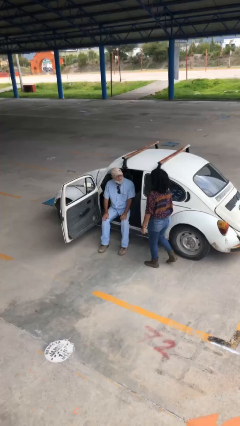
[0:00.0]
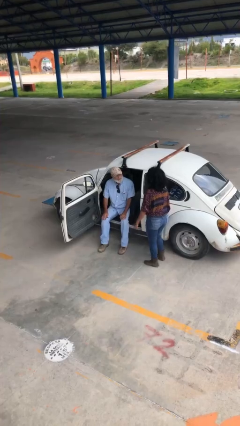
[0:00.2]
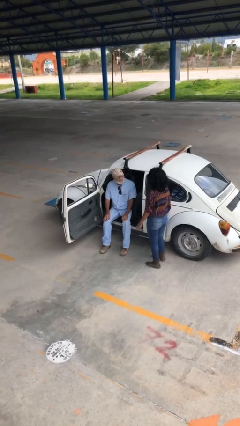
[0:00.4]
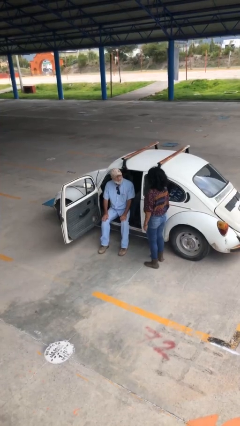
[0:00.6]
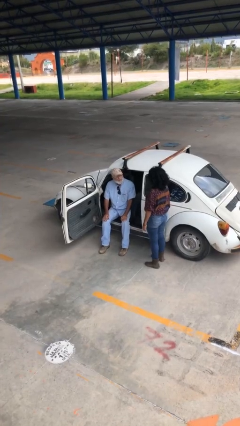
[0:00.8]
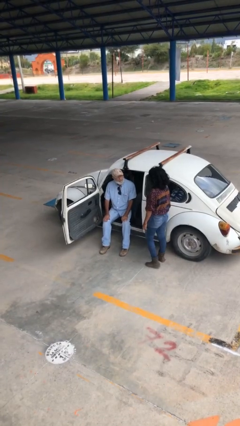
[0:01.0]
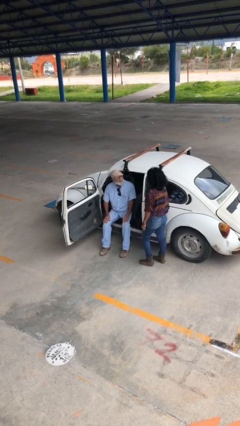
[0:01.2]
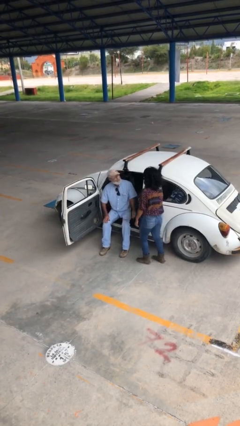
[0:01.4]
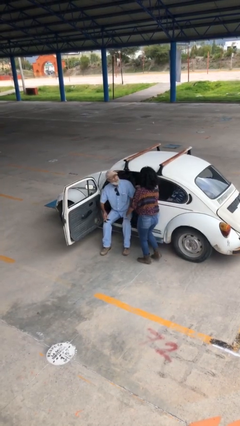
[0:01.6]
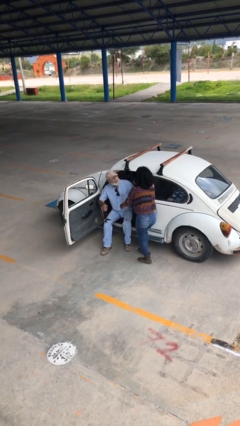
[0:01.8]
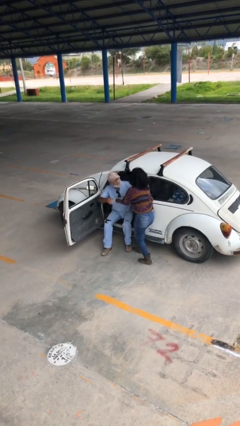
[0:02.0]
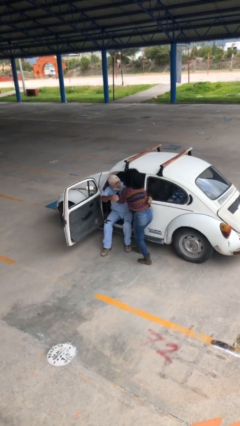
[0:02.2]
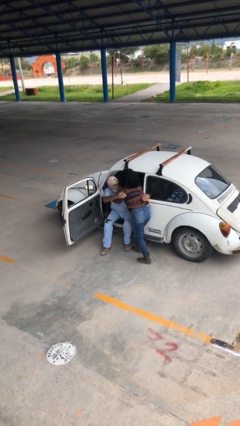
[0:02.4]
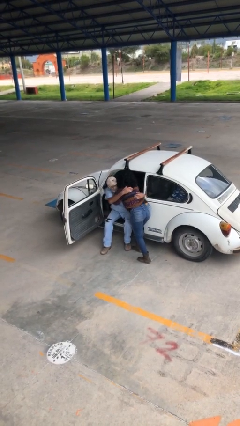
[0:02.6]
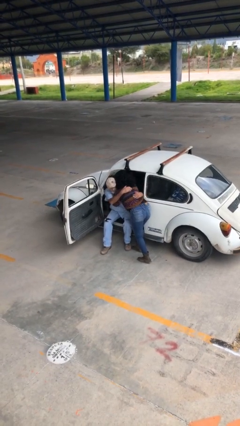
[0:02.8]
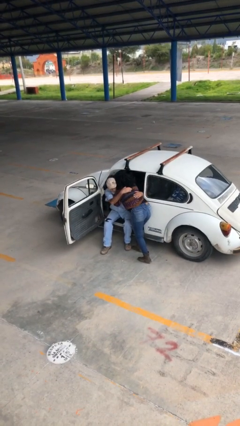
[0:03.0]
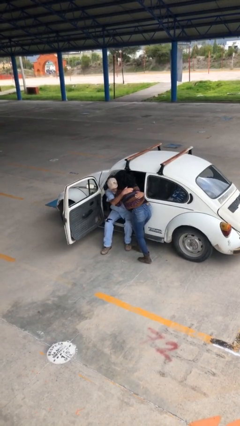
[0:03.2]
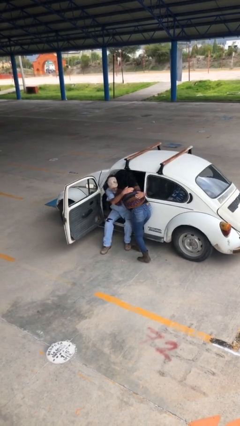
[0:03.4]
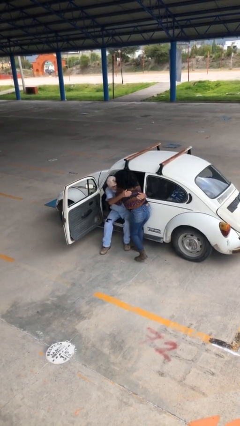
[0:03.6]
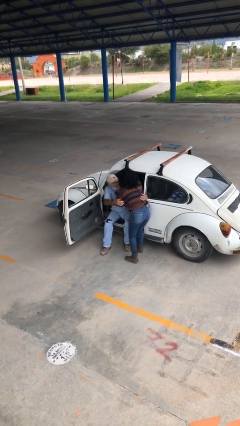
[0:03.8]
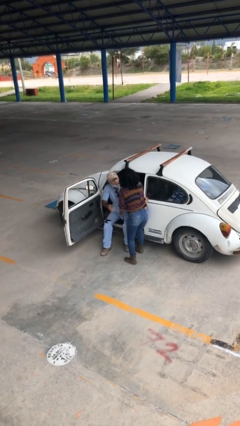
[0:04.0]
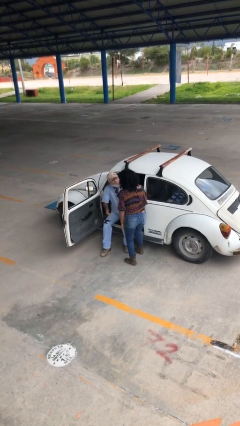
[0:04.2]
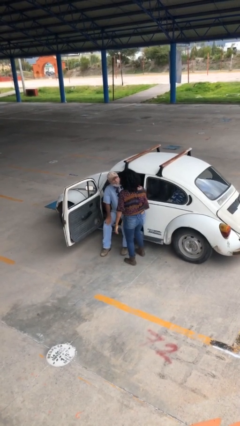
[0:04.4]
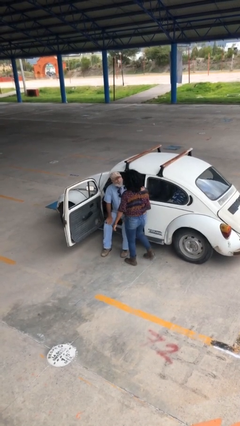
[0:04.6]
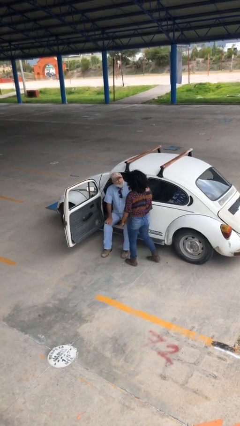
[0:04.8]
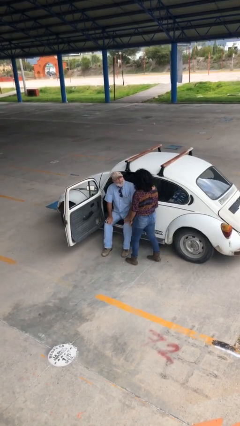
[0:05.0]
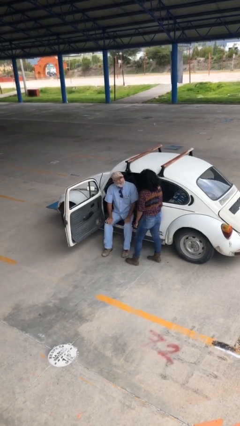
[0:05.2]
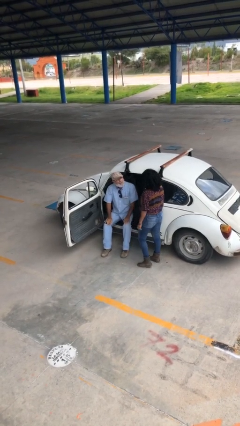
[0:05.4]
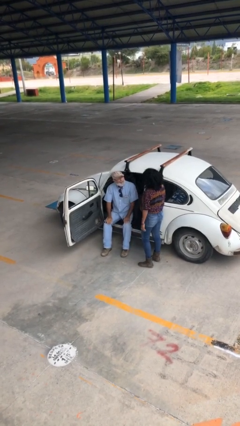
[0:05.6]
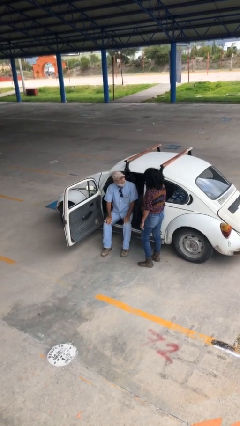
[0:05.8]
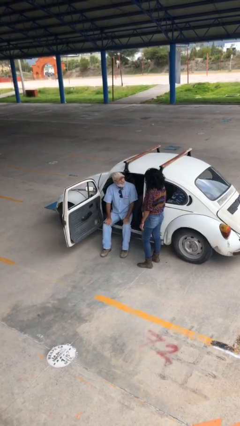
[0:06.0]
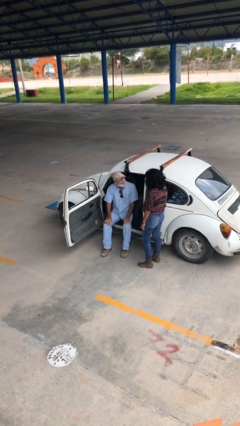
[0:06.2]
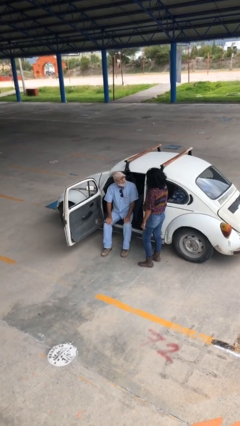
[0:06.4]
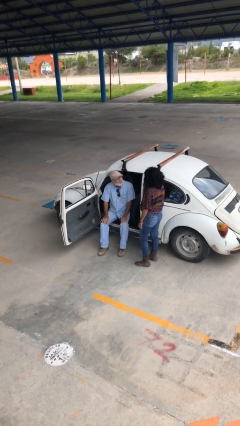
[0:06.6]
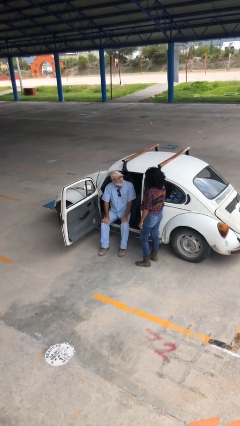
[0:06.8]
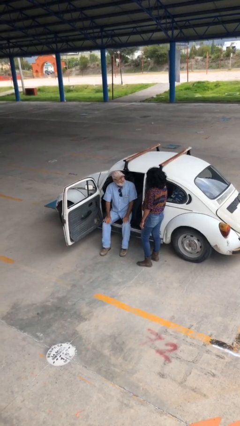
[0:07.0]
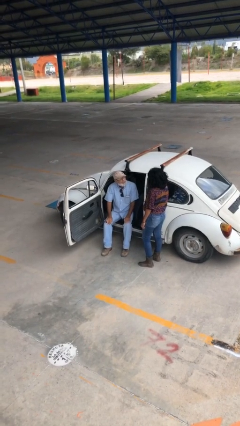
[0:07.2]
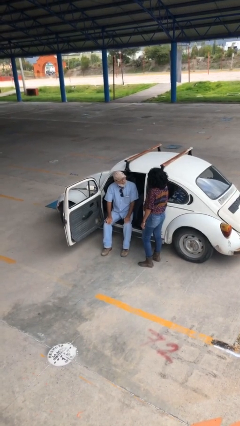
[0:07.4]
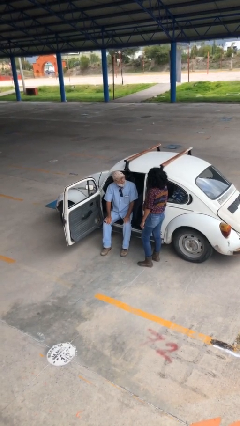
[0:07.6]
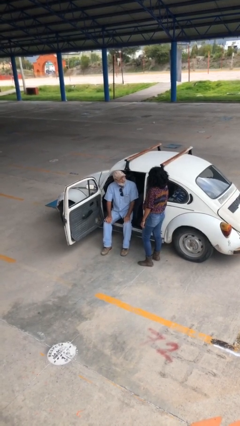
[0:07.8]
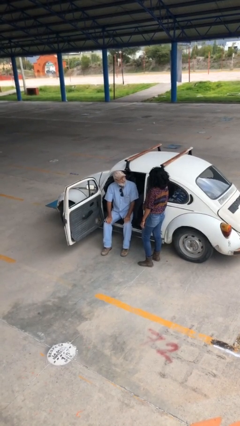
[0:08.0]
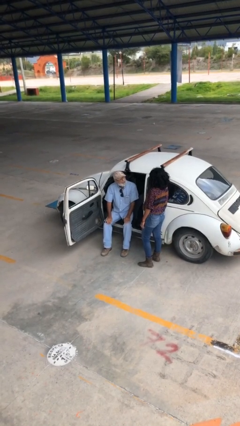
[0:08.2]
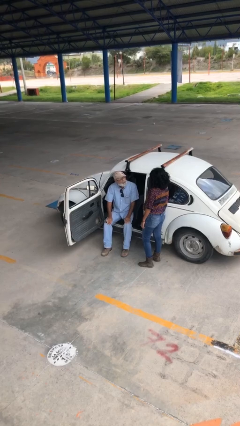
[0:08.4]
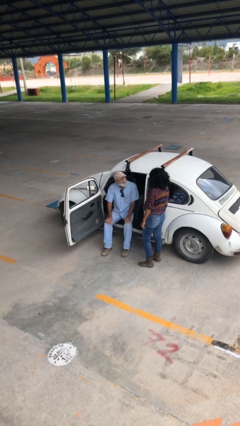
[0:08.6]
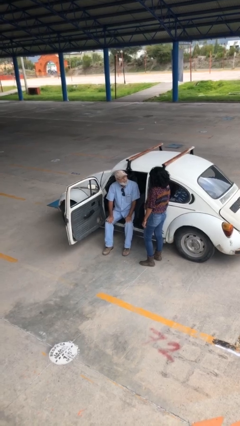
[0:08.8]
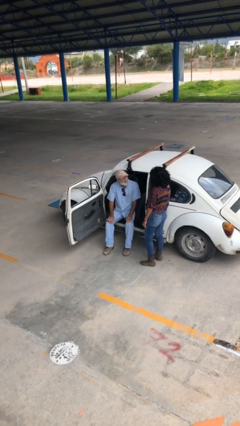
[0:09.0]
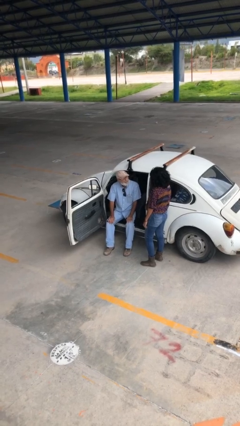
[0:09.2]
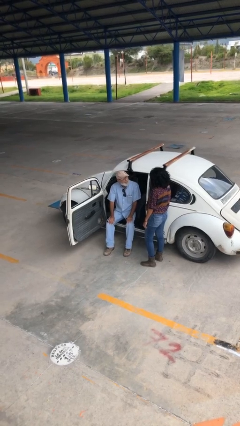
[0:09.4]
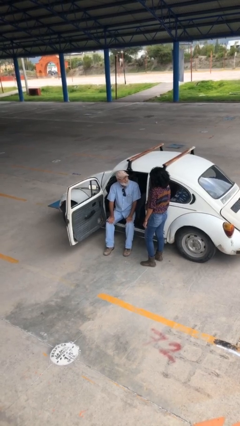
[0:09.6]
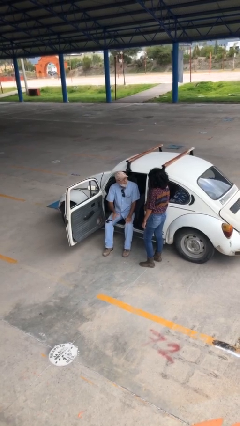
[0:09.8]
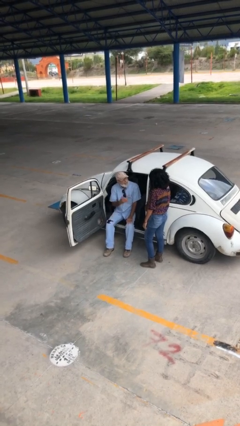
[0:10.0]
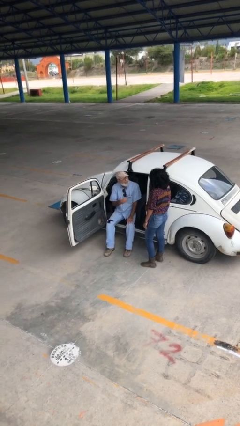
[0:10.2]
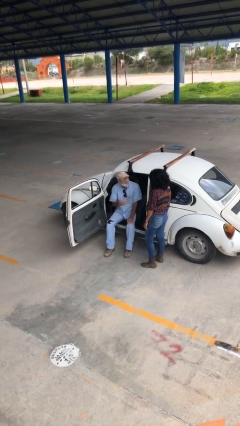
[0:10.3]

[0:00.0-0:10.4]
person embraces person

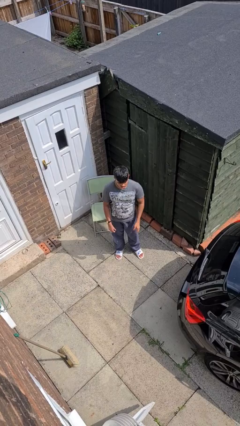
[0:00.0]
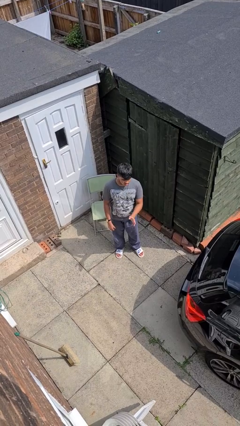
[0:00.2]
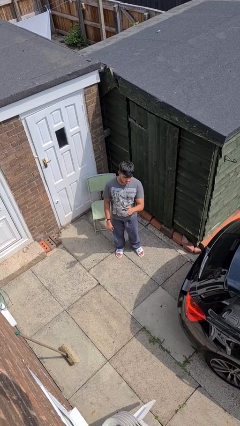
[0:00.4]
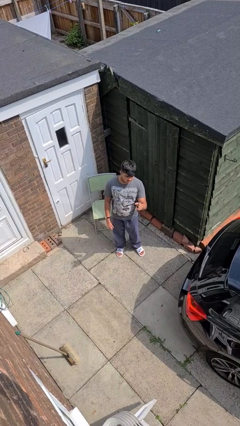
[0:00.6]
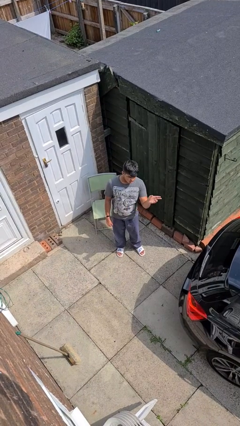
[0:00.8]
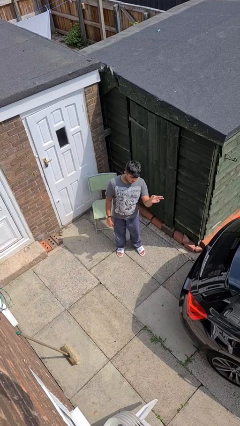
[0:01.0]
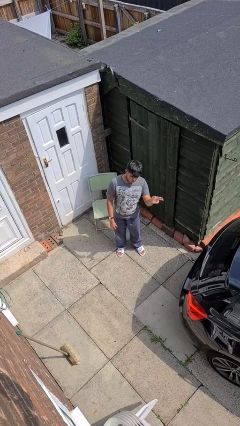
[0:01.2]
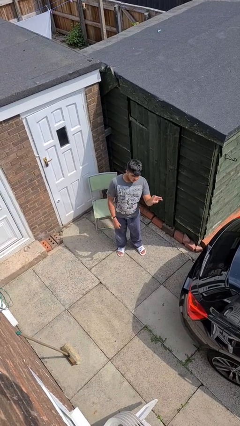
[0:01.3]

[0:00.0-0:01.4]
person gestures swipe left

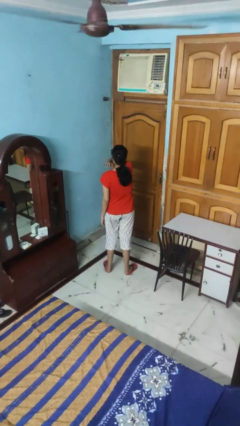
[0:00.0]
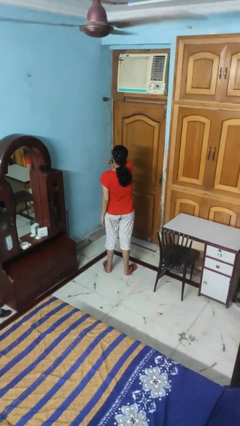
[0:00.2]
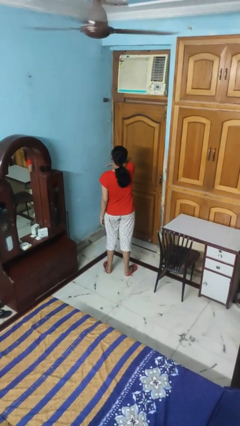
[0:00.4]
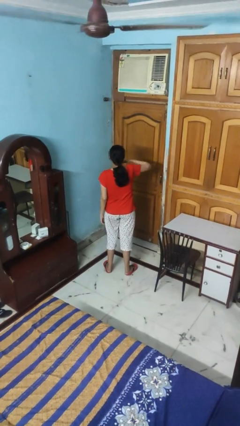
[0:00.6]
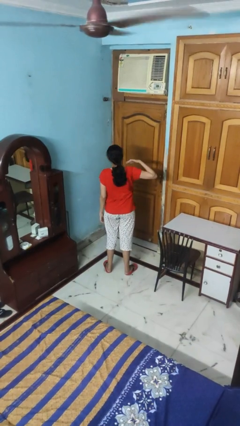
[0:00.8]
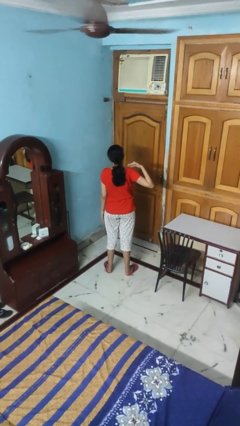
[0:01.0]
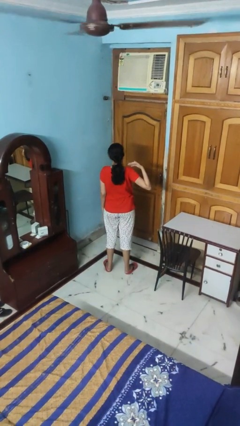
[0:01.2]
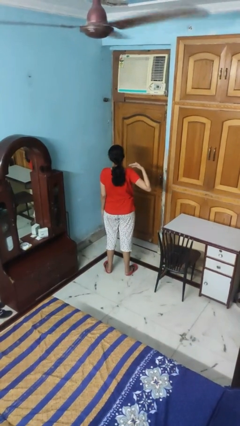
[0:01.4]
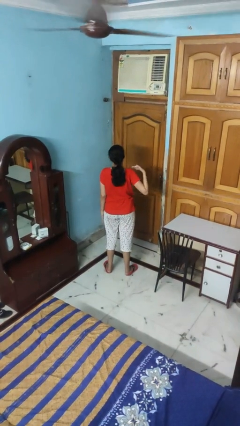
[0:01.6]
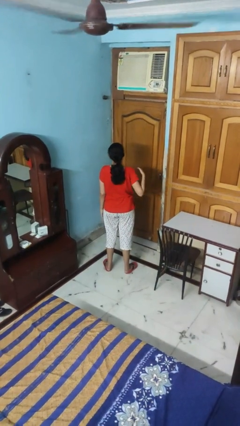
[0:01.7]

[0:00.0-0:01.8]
person gestures cut

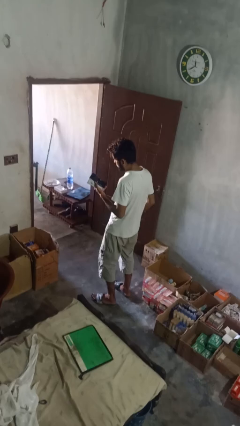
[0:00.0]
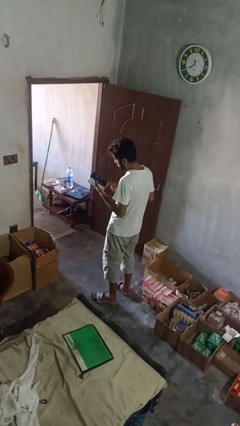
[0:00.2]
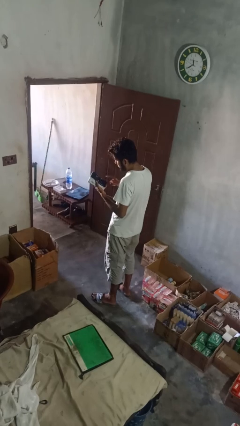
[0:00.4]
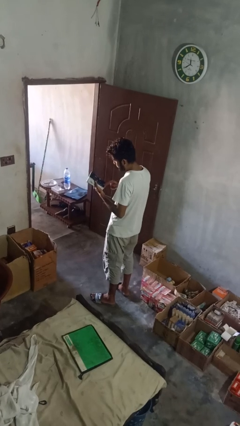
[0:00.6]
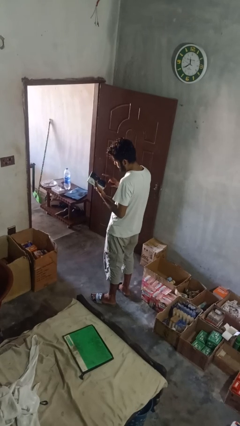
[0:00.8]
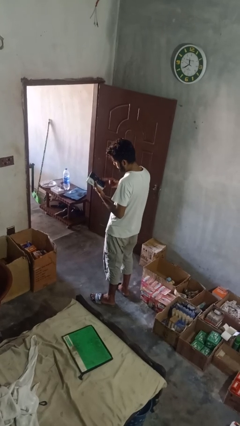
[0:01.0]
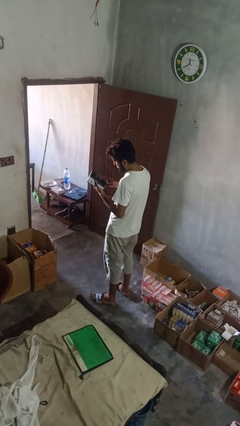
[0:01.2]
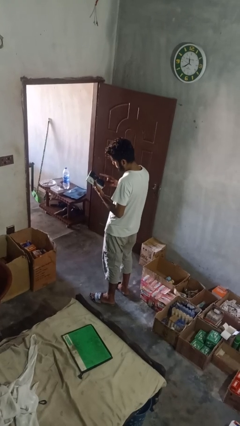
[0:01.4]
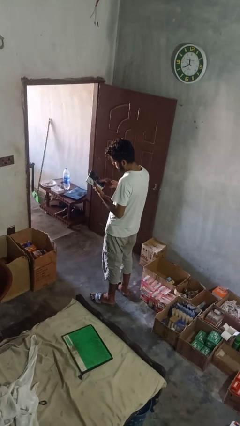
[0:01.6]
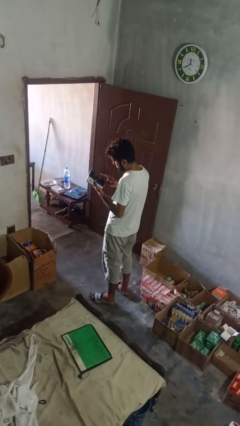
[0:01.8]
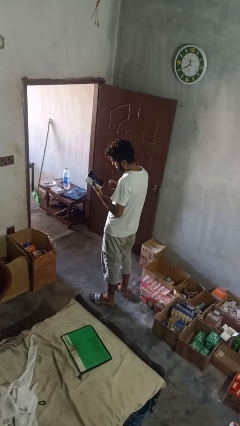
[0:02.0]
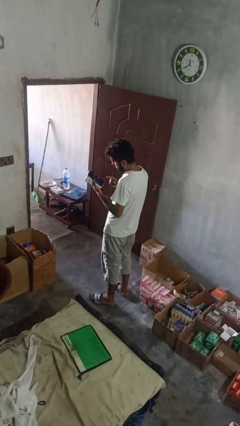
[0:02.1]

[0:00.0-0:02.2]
person interacts with tablet

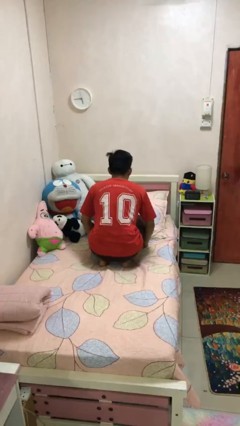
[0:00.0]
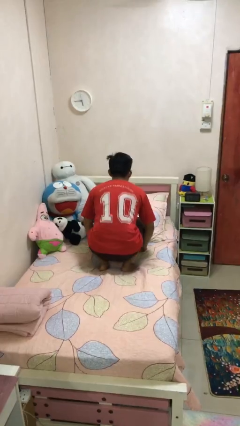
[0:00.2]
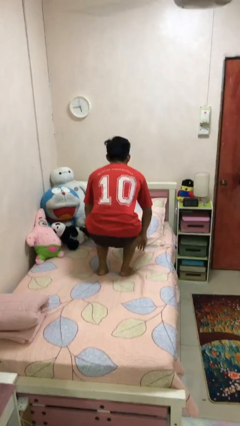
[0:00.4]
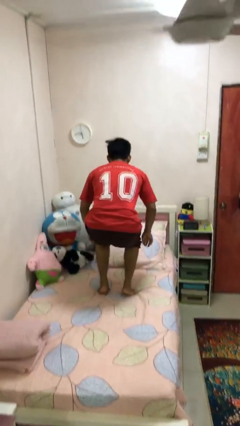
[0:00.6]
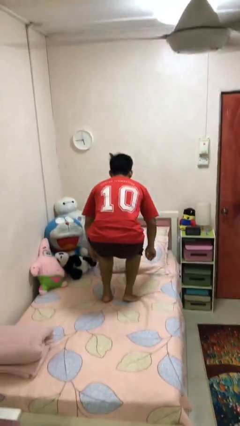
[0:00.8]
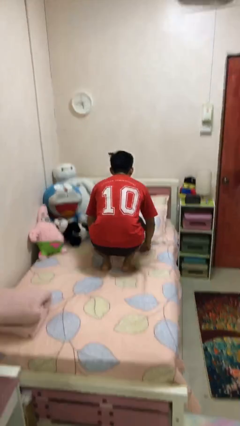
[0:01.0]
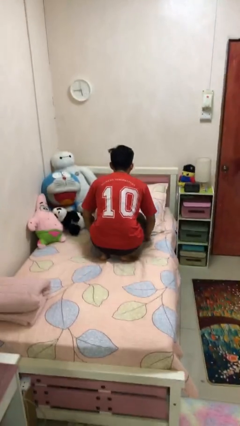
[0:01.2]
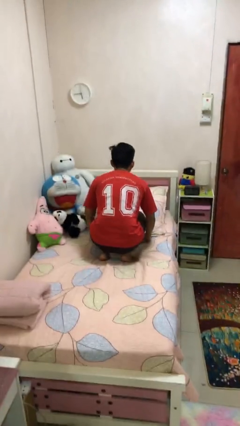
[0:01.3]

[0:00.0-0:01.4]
person jumps on bed

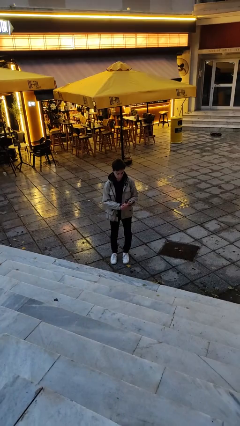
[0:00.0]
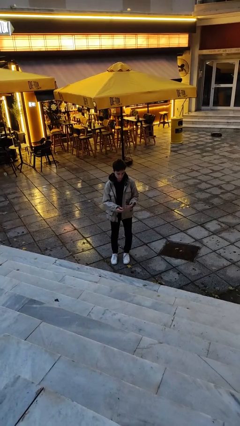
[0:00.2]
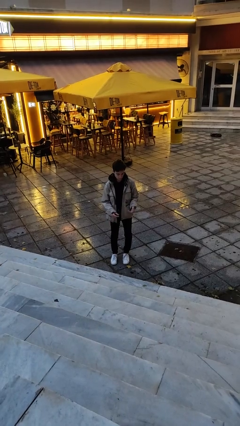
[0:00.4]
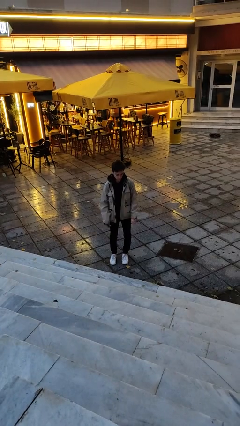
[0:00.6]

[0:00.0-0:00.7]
person takes off ring
